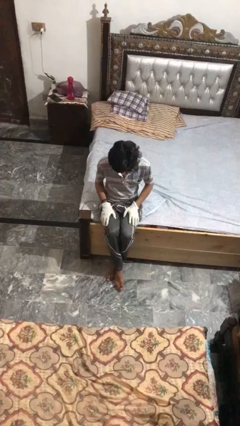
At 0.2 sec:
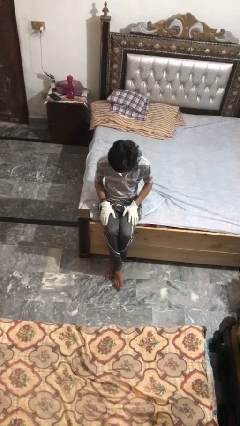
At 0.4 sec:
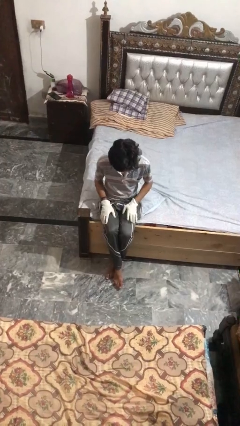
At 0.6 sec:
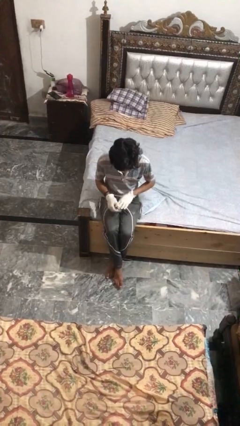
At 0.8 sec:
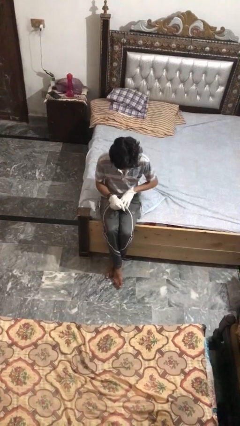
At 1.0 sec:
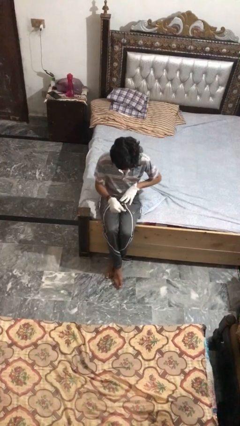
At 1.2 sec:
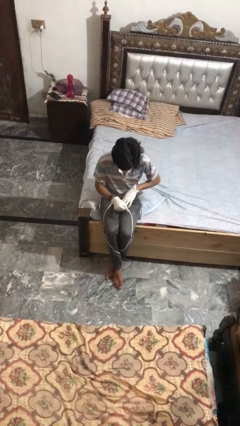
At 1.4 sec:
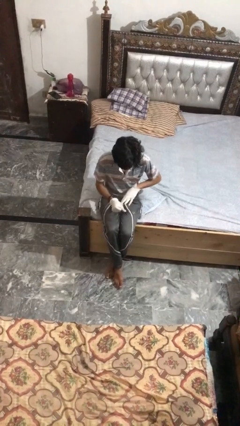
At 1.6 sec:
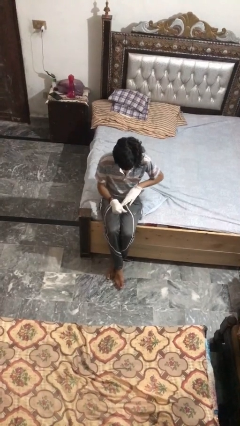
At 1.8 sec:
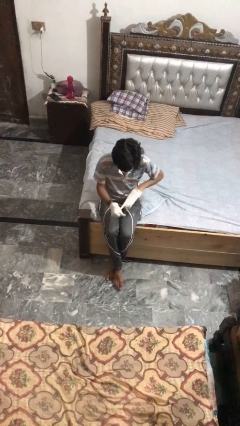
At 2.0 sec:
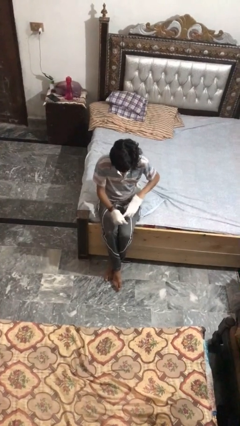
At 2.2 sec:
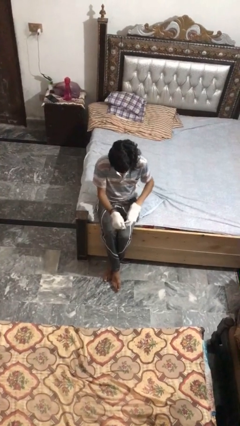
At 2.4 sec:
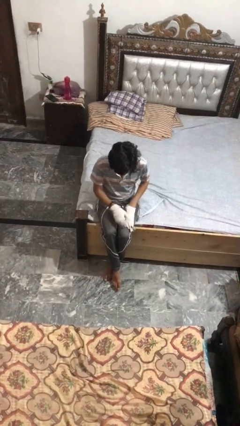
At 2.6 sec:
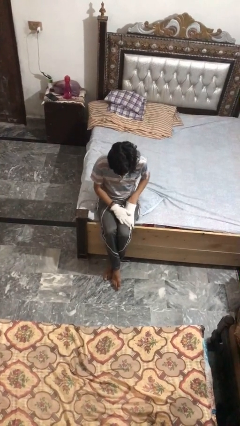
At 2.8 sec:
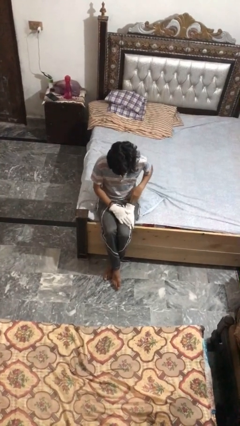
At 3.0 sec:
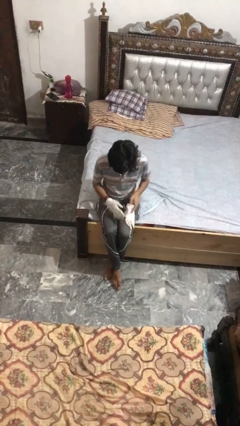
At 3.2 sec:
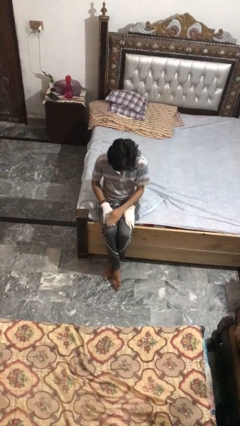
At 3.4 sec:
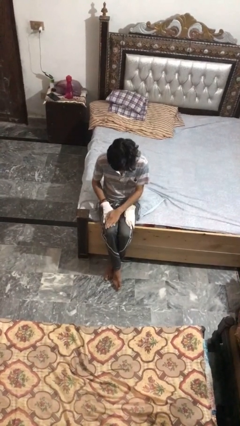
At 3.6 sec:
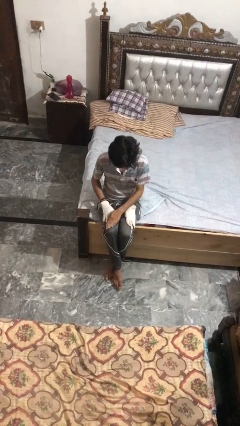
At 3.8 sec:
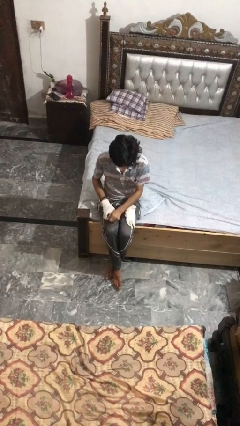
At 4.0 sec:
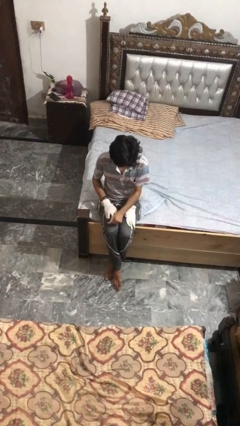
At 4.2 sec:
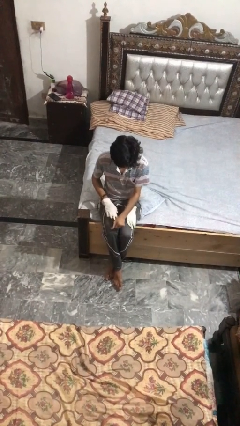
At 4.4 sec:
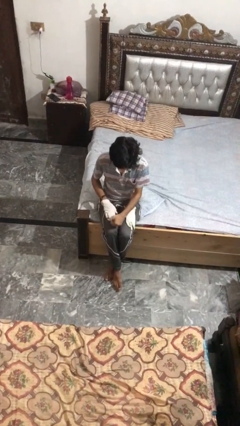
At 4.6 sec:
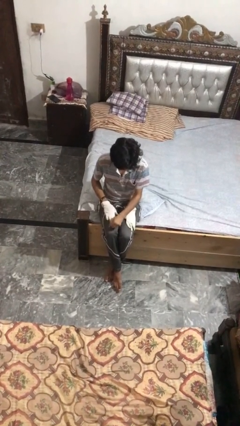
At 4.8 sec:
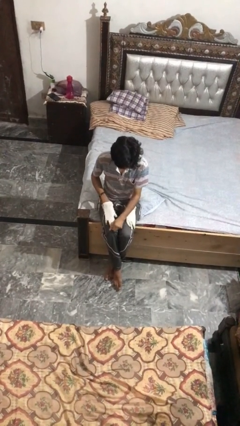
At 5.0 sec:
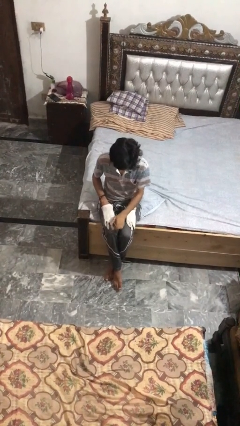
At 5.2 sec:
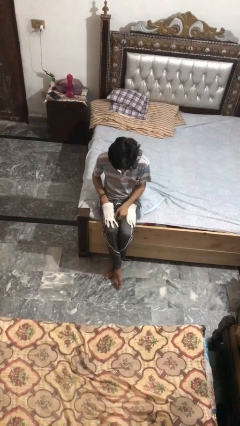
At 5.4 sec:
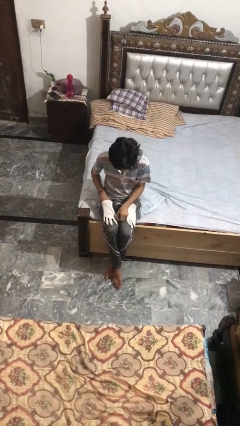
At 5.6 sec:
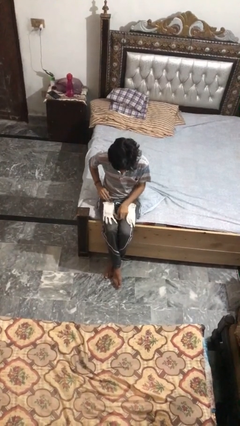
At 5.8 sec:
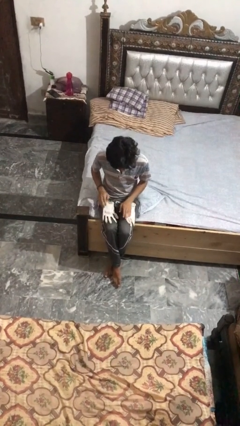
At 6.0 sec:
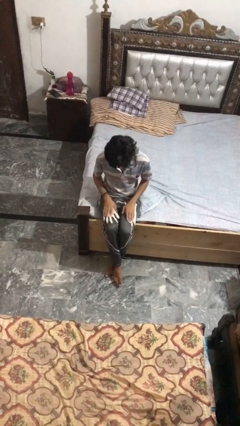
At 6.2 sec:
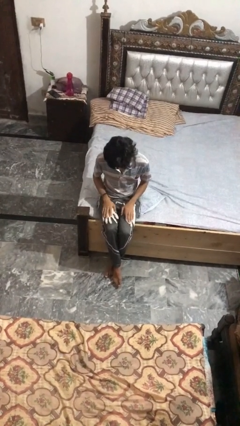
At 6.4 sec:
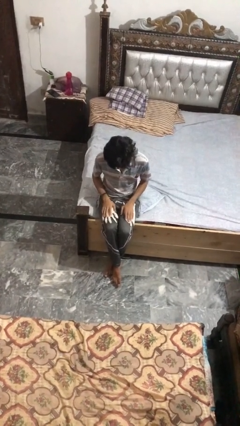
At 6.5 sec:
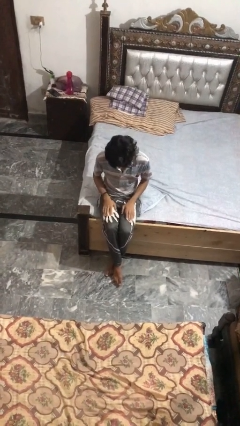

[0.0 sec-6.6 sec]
person takes off gloves

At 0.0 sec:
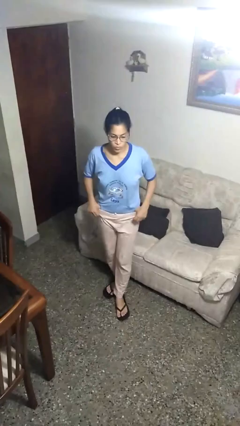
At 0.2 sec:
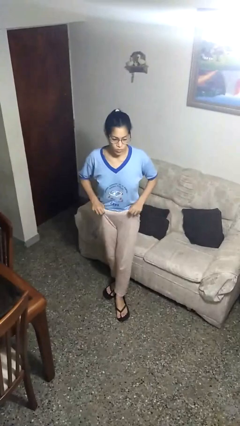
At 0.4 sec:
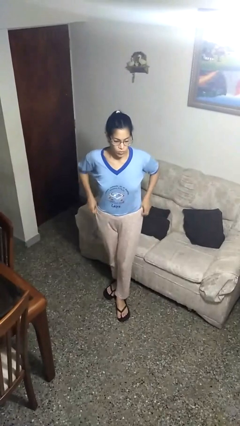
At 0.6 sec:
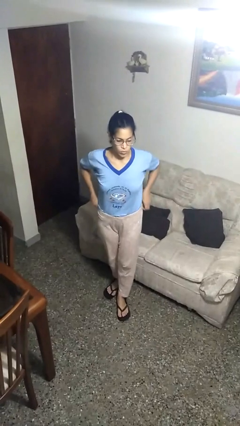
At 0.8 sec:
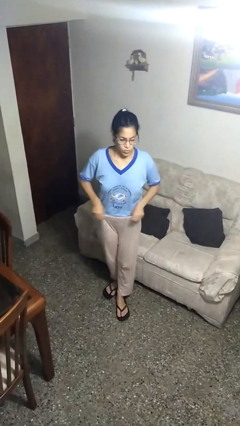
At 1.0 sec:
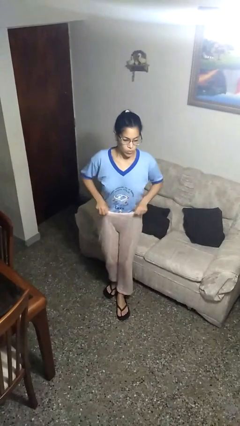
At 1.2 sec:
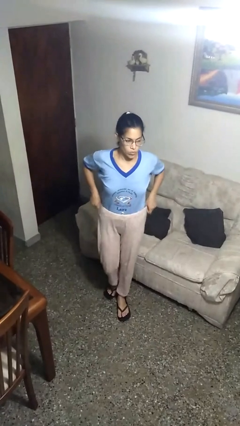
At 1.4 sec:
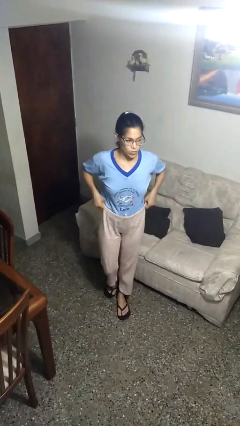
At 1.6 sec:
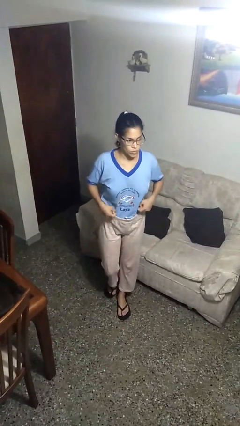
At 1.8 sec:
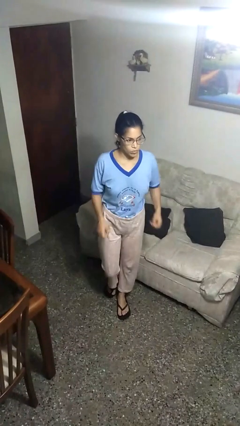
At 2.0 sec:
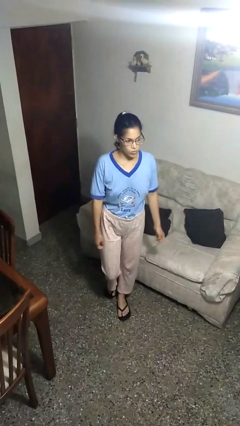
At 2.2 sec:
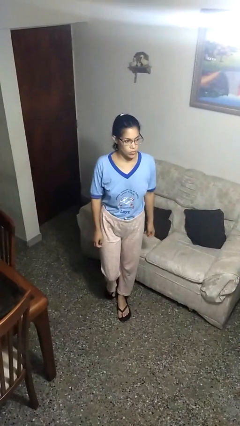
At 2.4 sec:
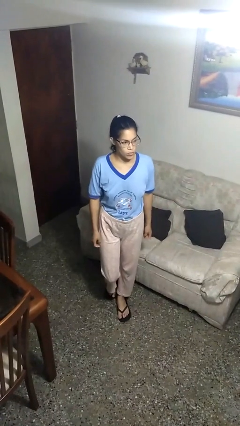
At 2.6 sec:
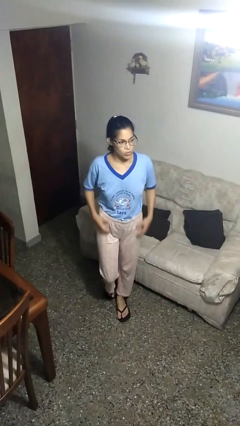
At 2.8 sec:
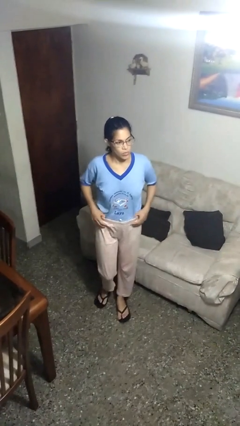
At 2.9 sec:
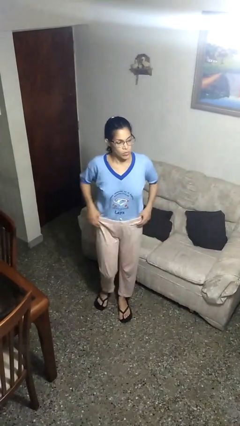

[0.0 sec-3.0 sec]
person hikes up pants

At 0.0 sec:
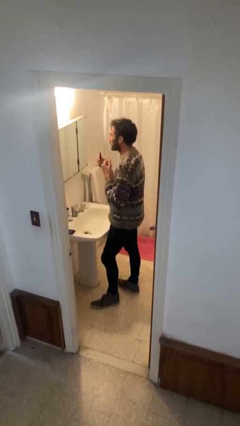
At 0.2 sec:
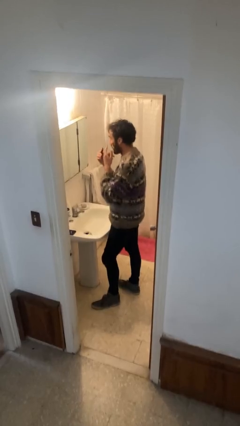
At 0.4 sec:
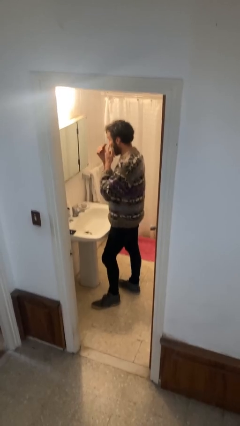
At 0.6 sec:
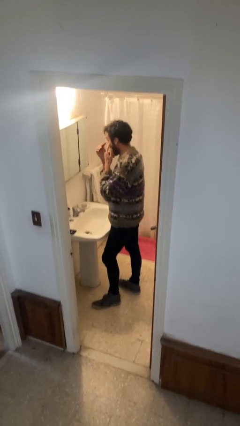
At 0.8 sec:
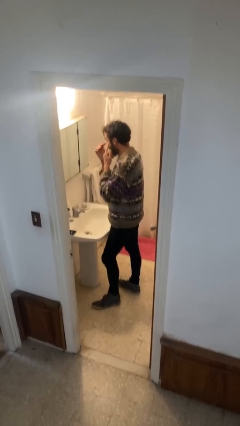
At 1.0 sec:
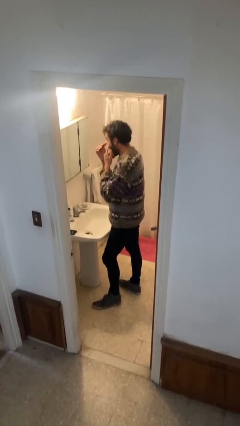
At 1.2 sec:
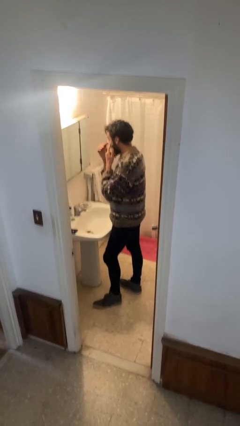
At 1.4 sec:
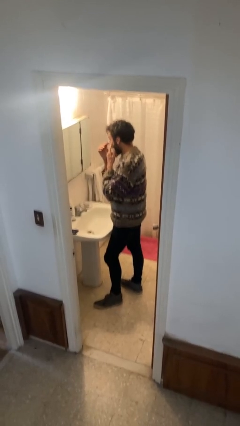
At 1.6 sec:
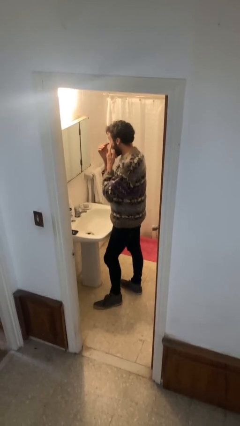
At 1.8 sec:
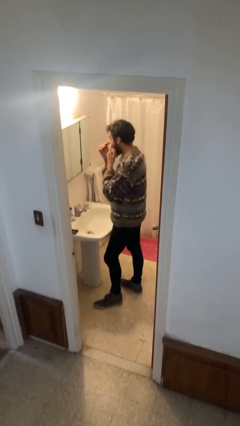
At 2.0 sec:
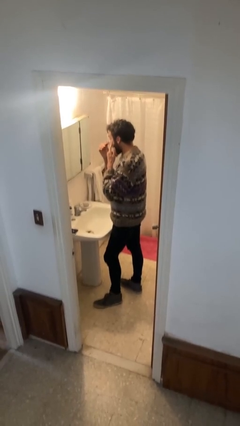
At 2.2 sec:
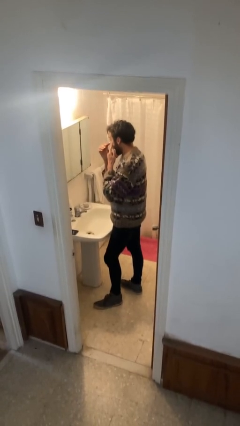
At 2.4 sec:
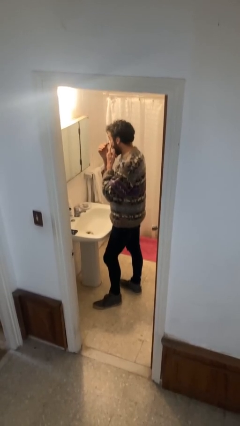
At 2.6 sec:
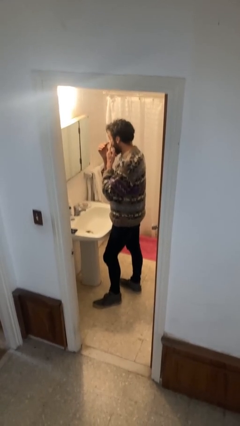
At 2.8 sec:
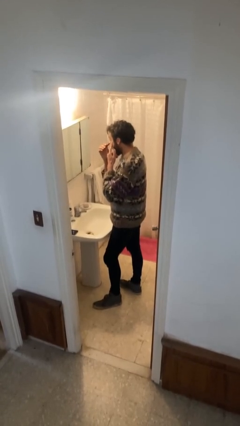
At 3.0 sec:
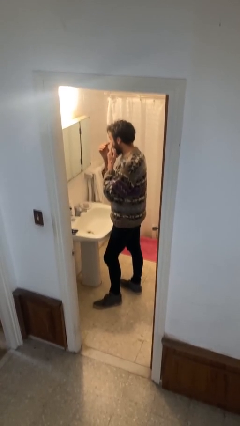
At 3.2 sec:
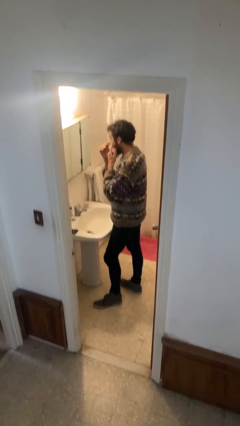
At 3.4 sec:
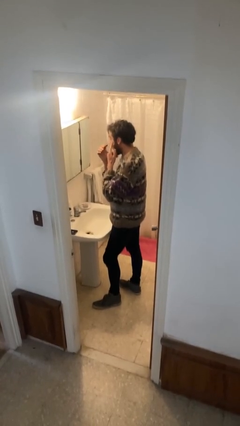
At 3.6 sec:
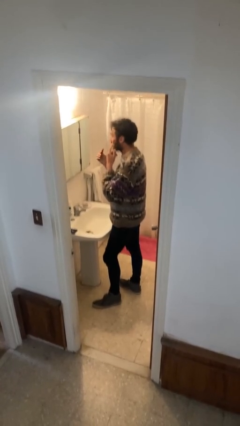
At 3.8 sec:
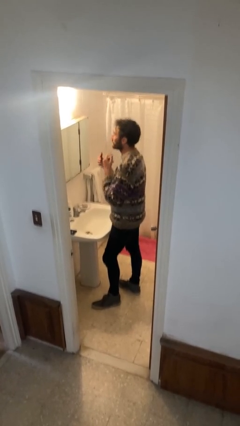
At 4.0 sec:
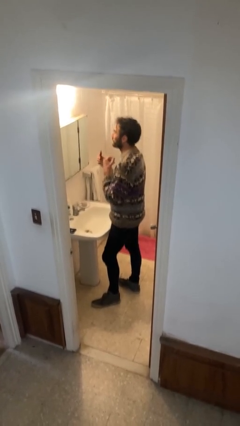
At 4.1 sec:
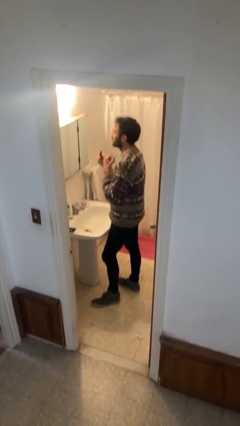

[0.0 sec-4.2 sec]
person applies eye makeup

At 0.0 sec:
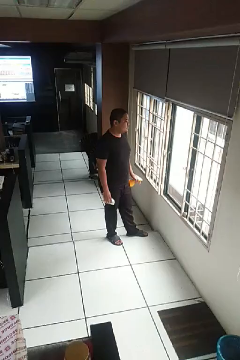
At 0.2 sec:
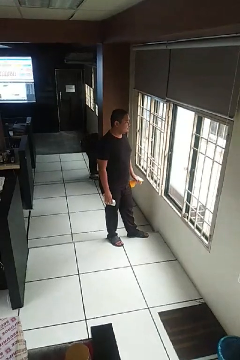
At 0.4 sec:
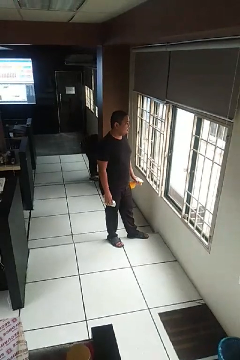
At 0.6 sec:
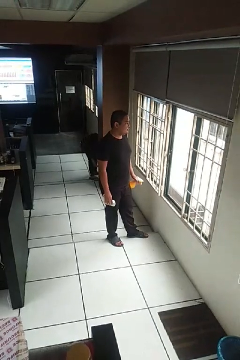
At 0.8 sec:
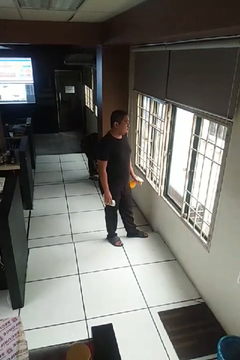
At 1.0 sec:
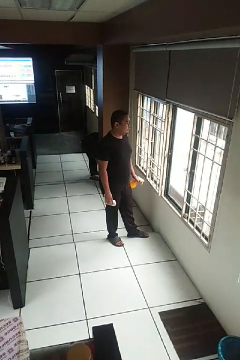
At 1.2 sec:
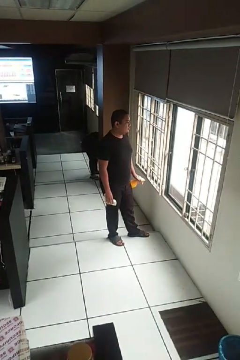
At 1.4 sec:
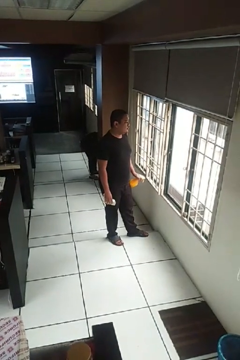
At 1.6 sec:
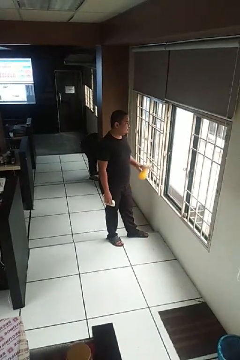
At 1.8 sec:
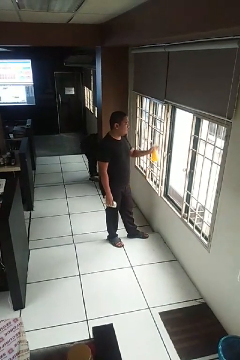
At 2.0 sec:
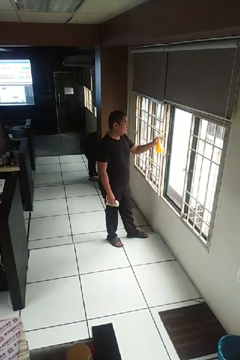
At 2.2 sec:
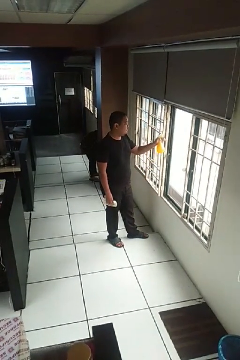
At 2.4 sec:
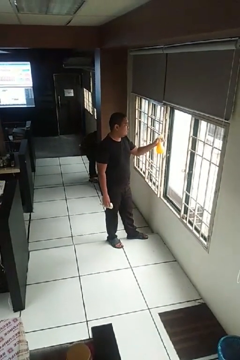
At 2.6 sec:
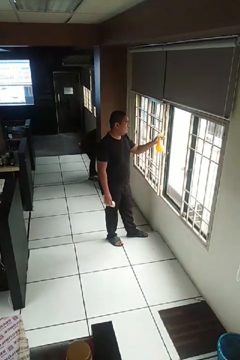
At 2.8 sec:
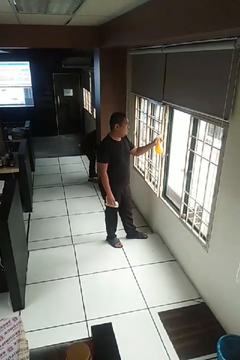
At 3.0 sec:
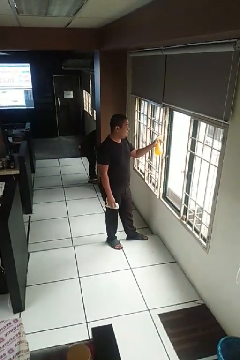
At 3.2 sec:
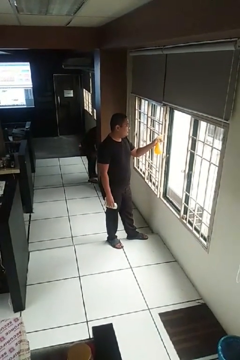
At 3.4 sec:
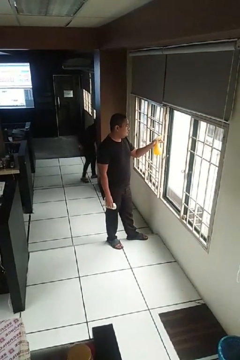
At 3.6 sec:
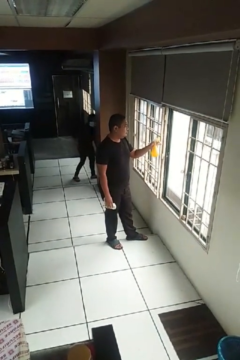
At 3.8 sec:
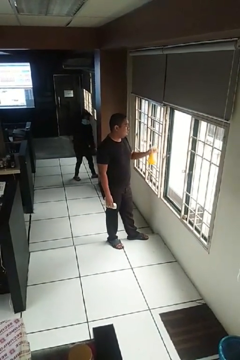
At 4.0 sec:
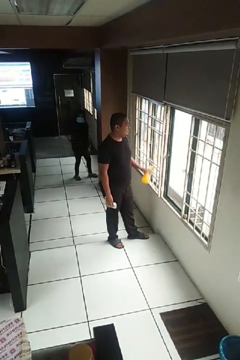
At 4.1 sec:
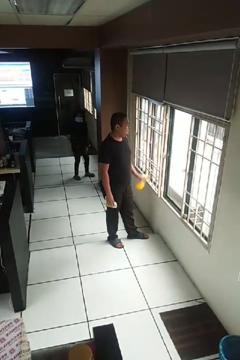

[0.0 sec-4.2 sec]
person sprays from bottle

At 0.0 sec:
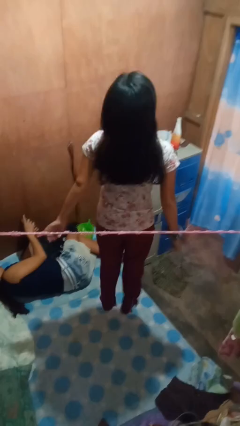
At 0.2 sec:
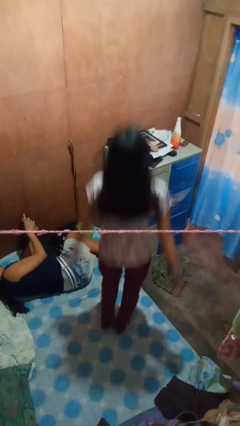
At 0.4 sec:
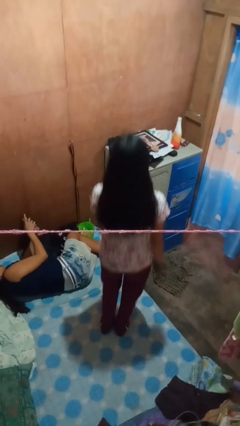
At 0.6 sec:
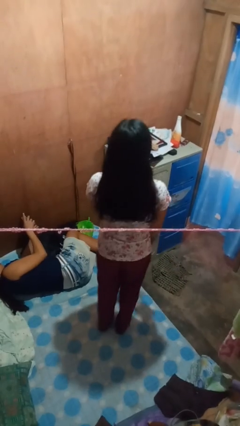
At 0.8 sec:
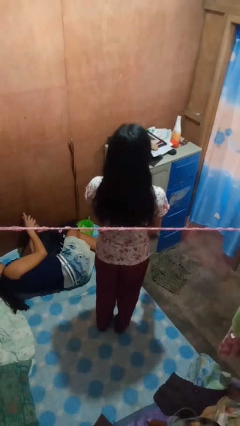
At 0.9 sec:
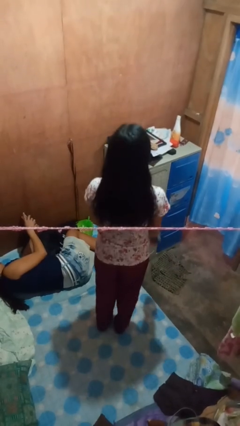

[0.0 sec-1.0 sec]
person jumps on bed
